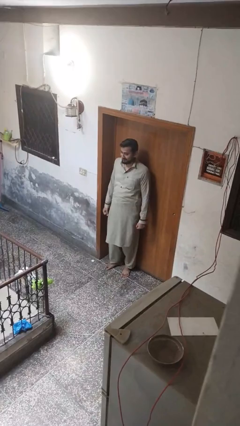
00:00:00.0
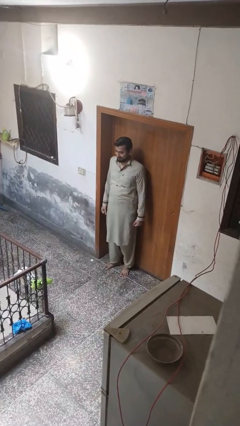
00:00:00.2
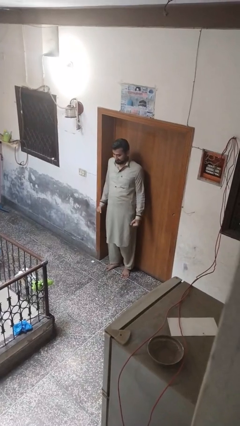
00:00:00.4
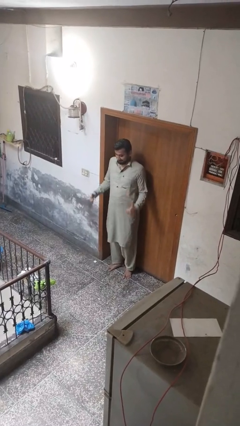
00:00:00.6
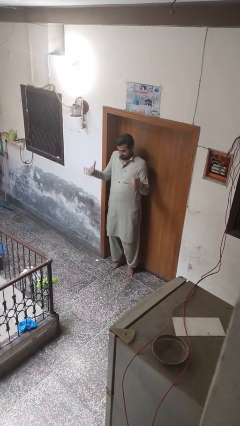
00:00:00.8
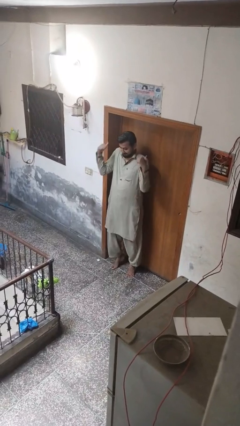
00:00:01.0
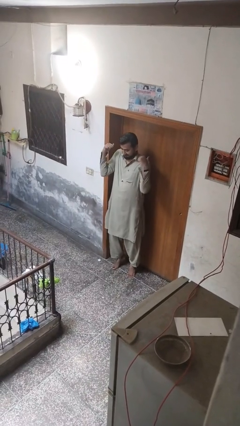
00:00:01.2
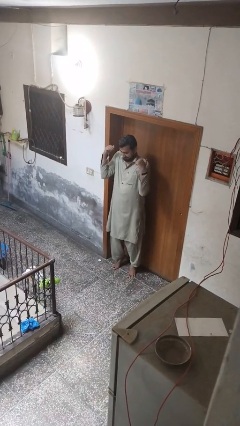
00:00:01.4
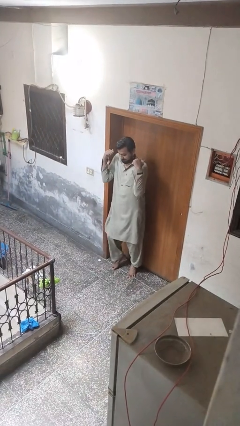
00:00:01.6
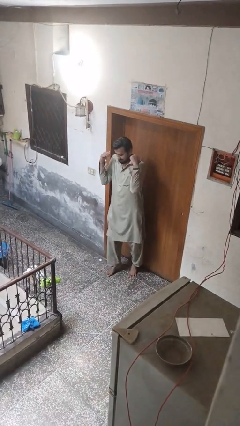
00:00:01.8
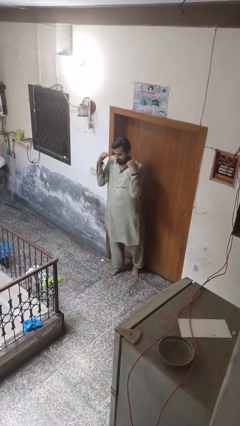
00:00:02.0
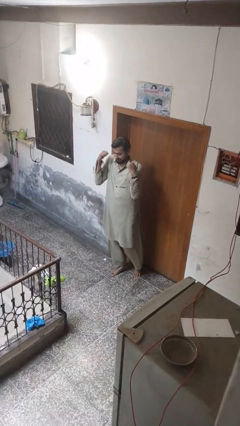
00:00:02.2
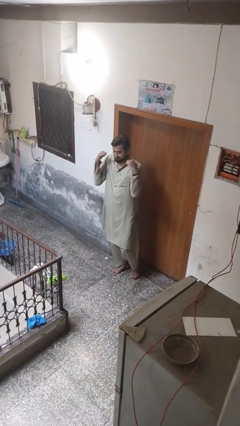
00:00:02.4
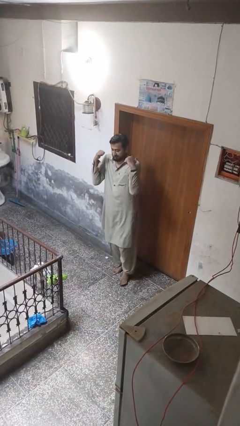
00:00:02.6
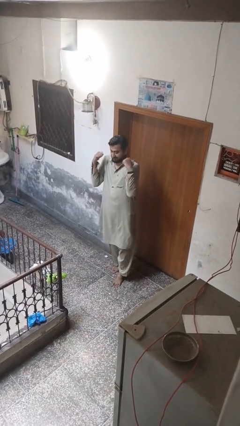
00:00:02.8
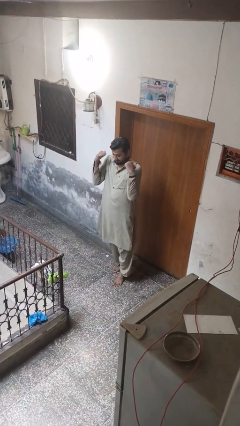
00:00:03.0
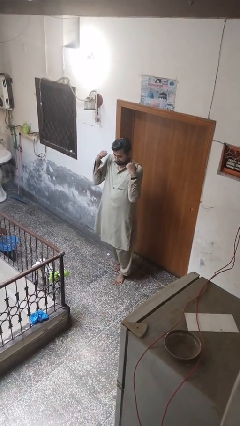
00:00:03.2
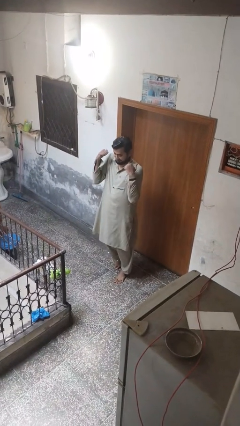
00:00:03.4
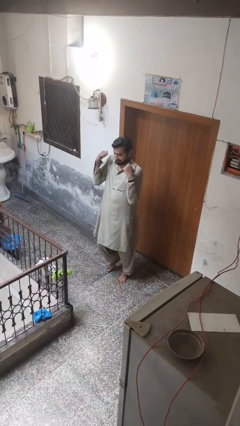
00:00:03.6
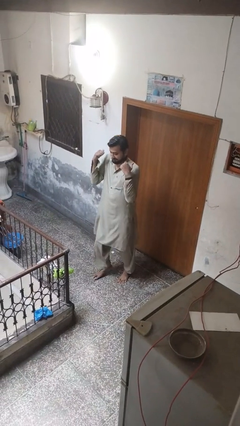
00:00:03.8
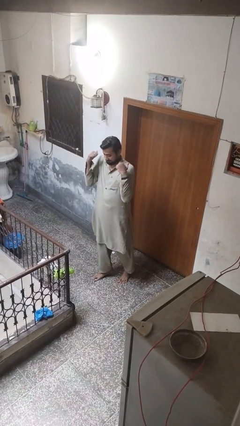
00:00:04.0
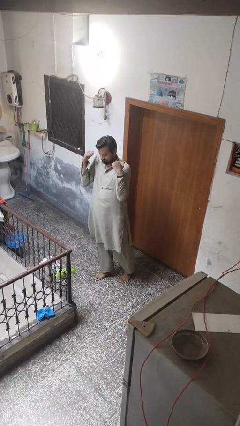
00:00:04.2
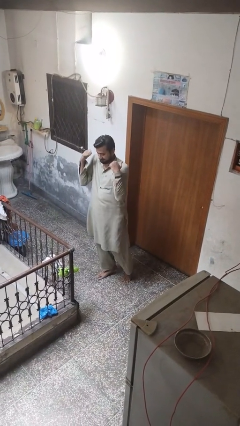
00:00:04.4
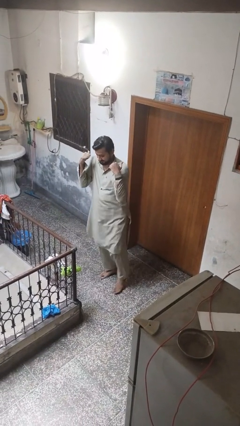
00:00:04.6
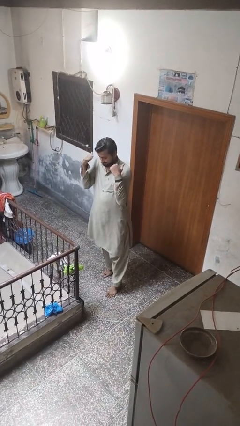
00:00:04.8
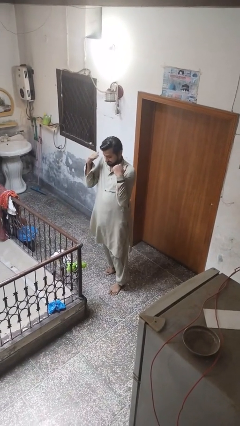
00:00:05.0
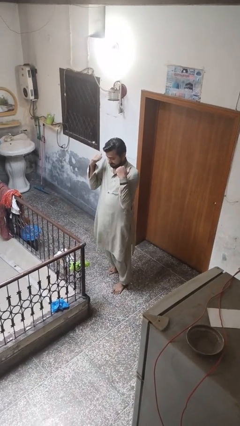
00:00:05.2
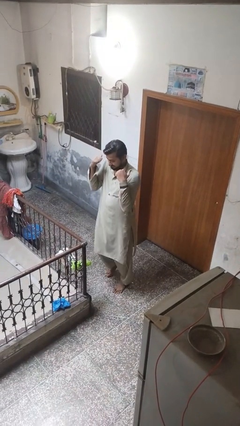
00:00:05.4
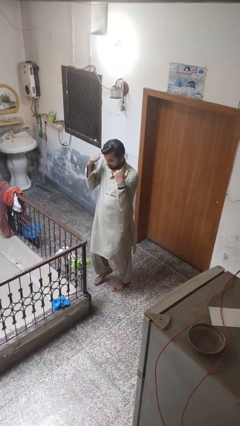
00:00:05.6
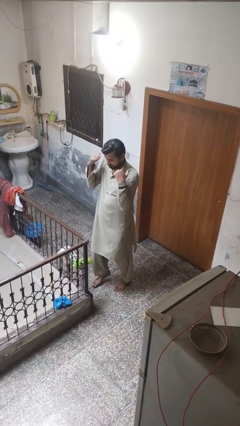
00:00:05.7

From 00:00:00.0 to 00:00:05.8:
person walks tiptoe

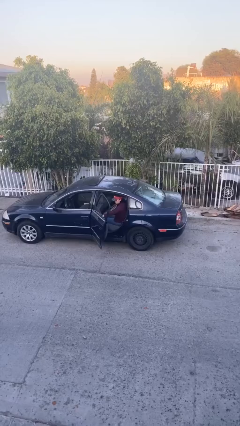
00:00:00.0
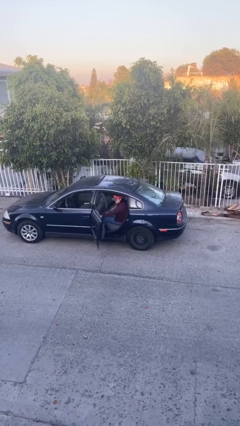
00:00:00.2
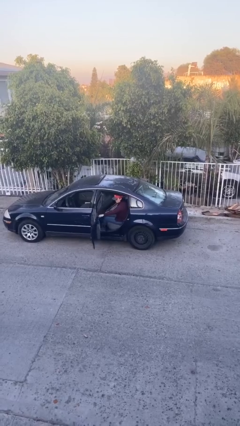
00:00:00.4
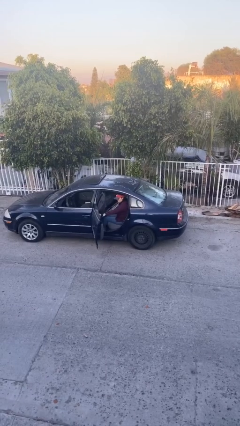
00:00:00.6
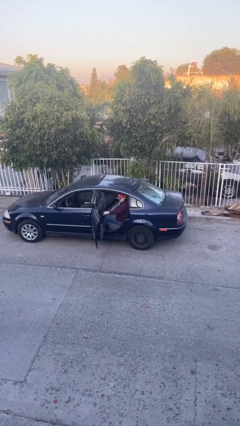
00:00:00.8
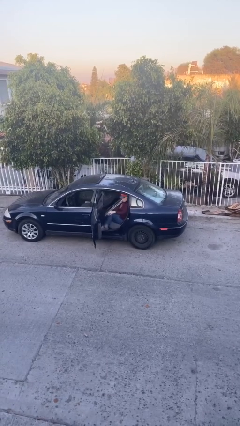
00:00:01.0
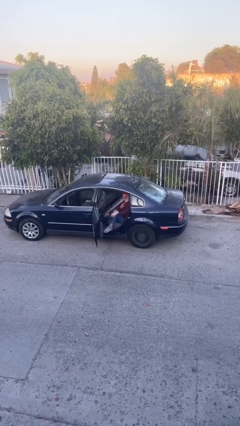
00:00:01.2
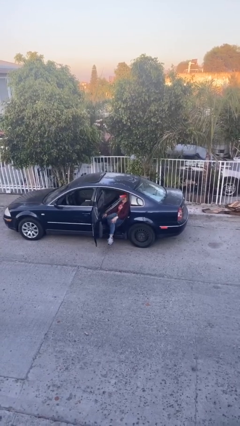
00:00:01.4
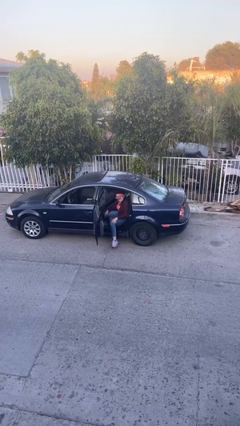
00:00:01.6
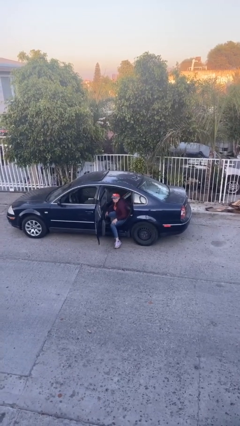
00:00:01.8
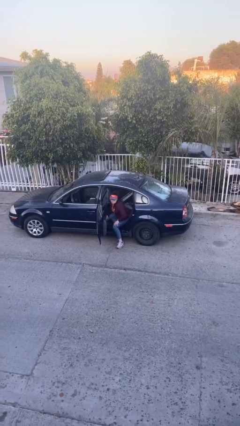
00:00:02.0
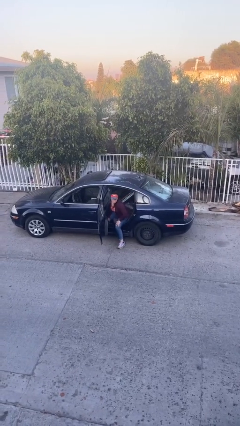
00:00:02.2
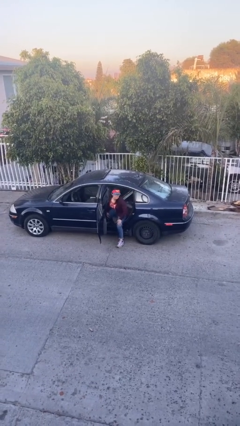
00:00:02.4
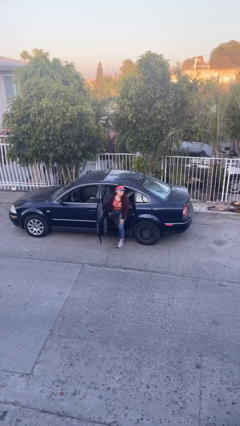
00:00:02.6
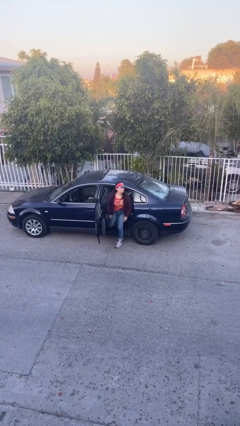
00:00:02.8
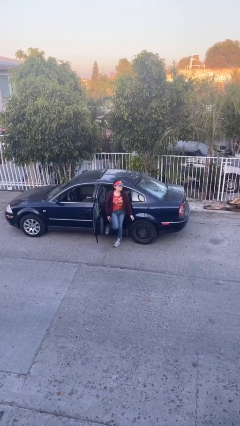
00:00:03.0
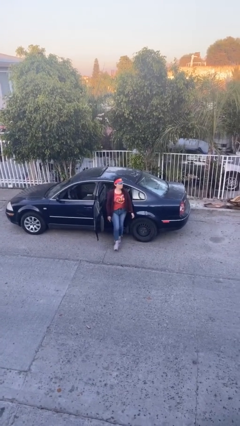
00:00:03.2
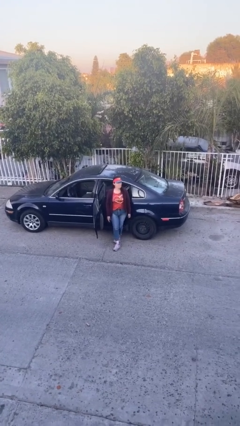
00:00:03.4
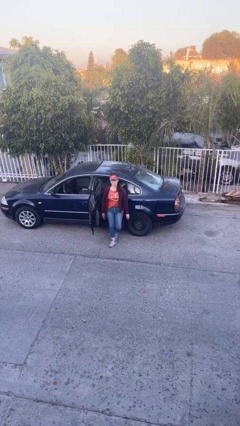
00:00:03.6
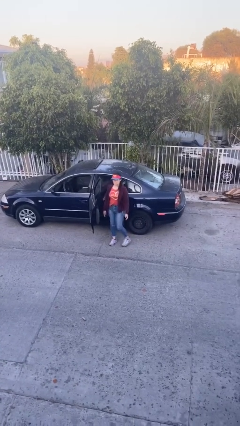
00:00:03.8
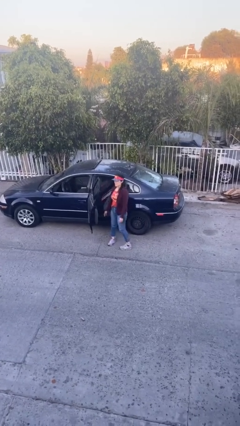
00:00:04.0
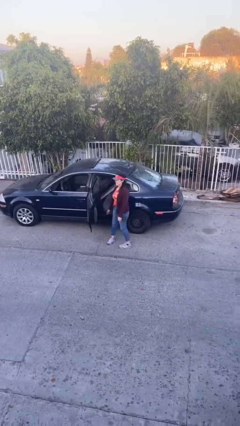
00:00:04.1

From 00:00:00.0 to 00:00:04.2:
person exits car

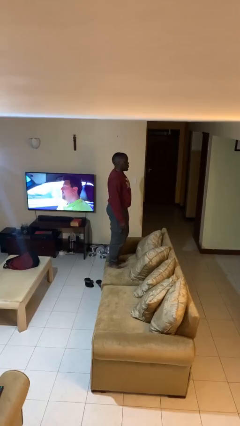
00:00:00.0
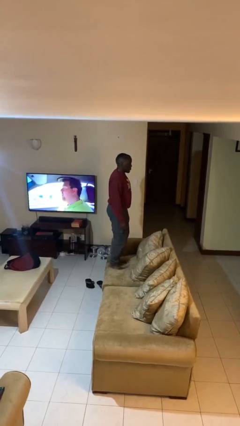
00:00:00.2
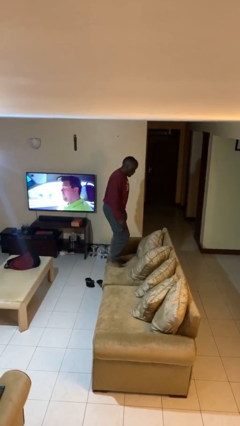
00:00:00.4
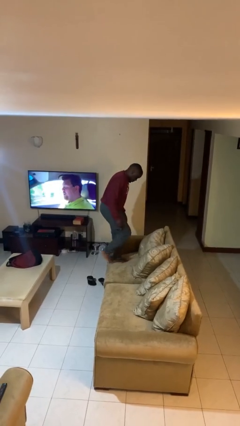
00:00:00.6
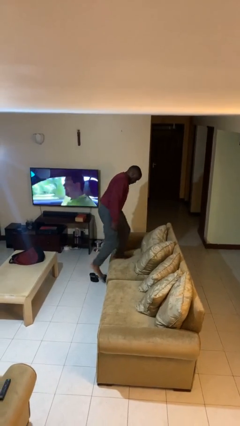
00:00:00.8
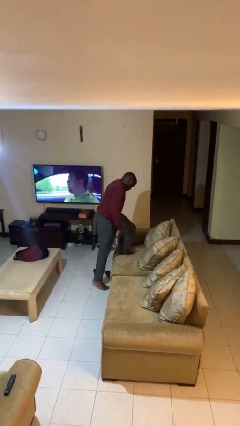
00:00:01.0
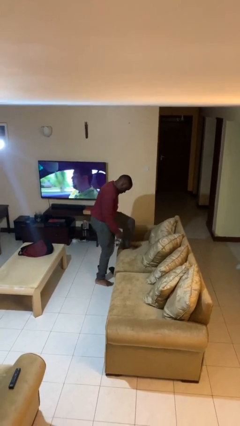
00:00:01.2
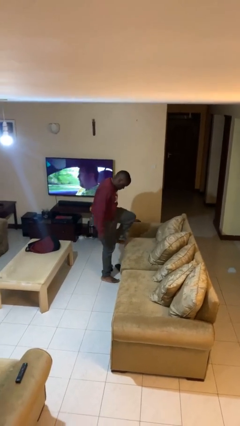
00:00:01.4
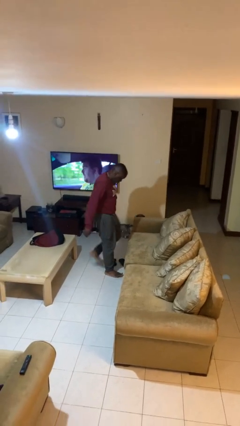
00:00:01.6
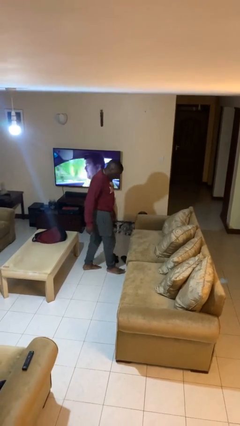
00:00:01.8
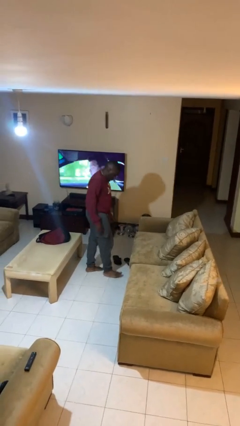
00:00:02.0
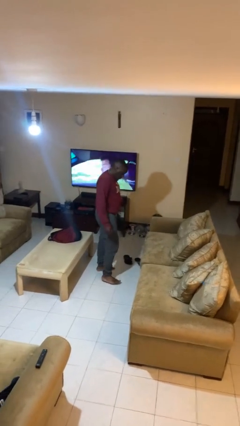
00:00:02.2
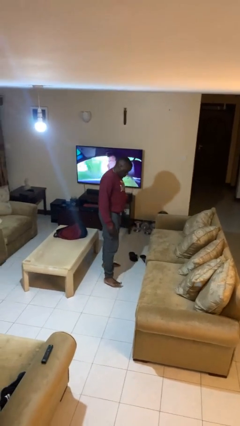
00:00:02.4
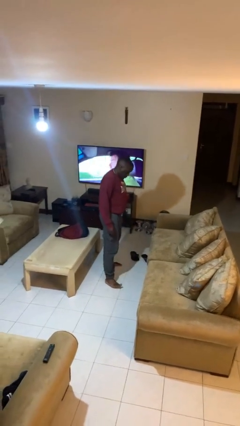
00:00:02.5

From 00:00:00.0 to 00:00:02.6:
person climbs off couch

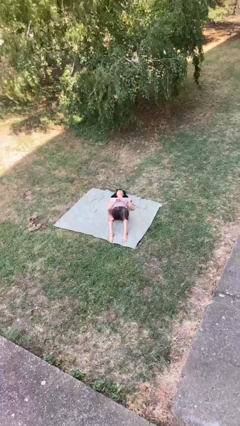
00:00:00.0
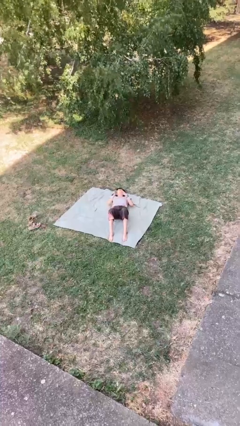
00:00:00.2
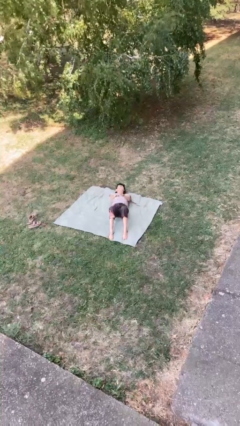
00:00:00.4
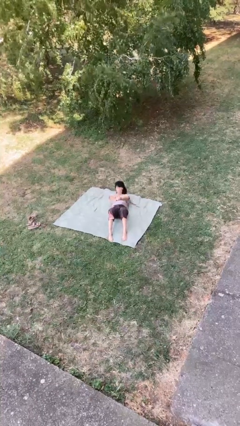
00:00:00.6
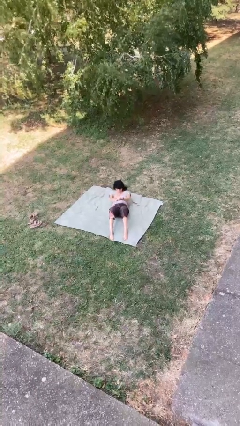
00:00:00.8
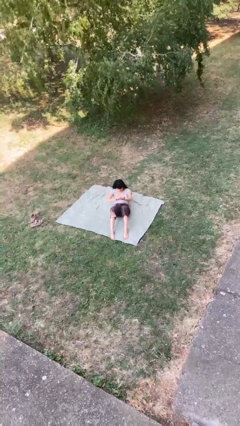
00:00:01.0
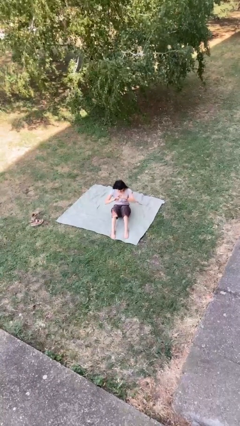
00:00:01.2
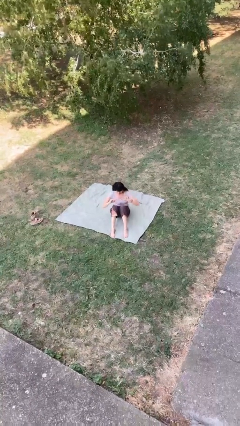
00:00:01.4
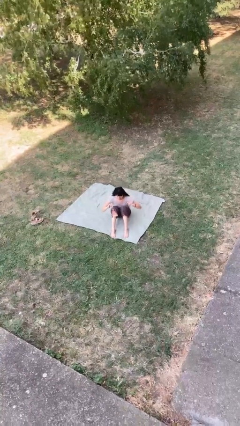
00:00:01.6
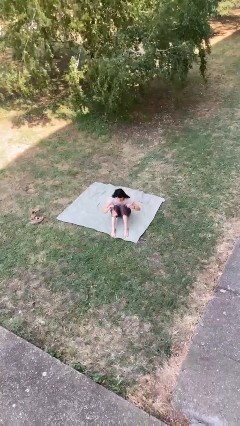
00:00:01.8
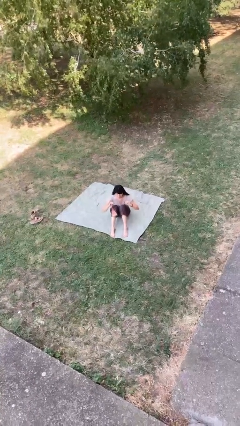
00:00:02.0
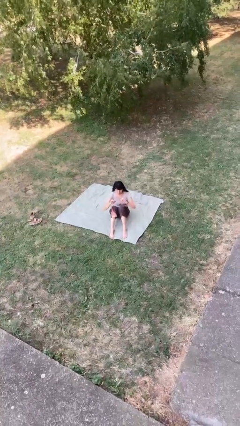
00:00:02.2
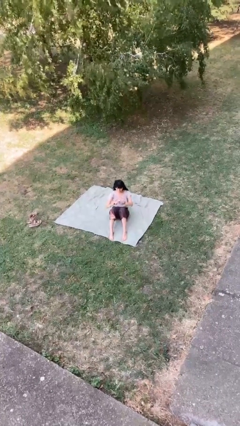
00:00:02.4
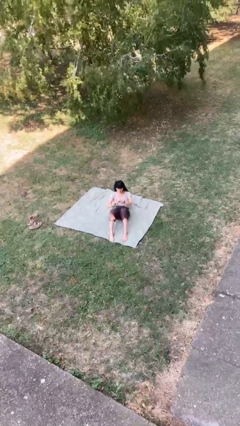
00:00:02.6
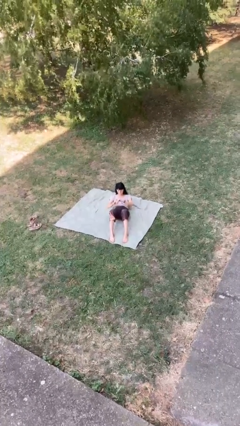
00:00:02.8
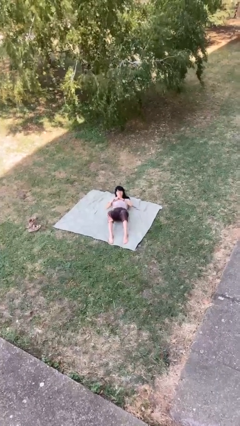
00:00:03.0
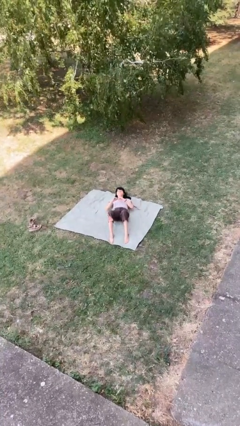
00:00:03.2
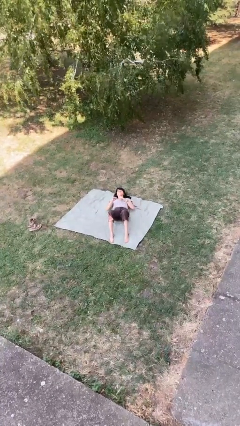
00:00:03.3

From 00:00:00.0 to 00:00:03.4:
person exercises with situp

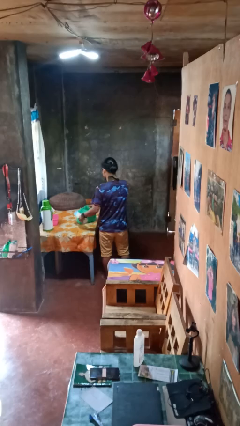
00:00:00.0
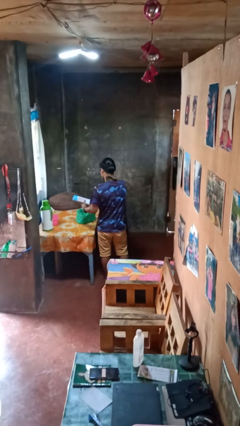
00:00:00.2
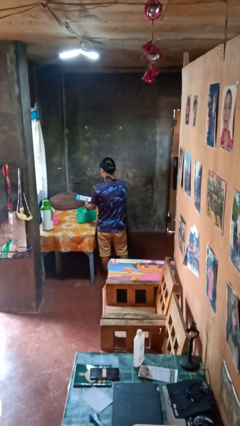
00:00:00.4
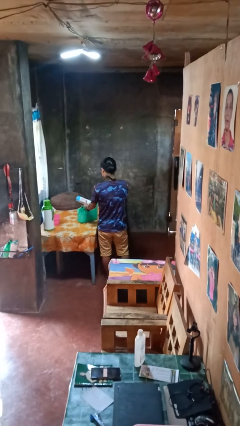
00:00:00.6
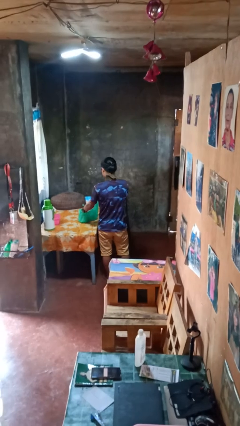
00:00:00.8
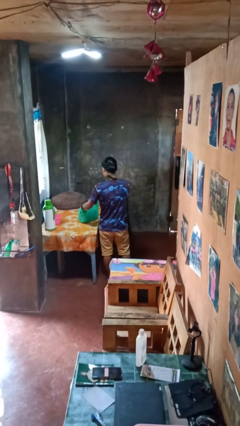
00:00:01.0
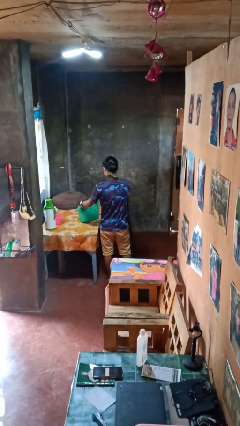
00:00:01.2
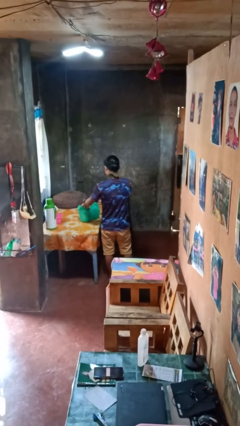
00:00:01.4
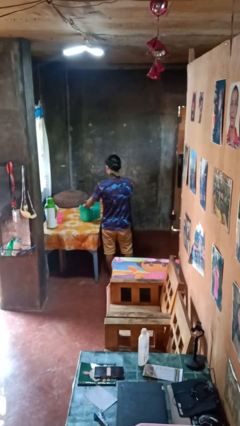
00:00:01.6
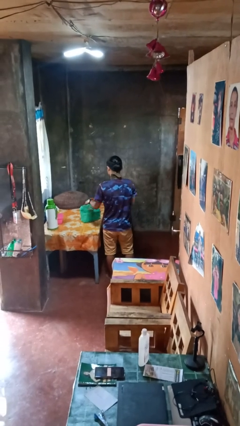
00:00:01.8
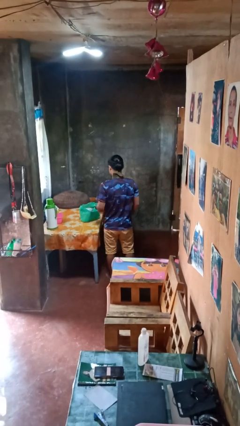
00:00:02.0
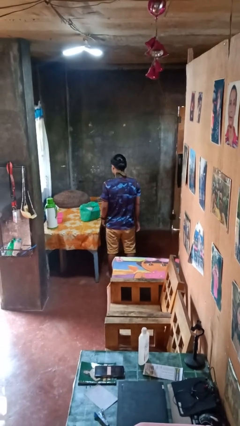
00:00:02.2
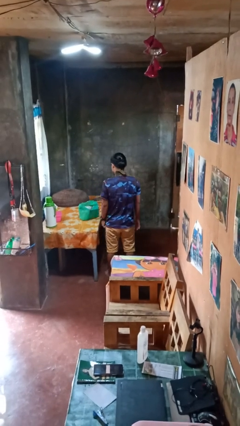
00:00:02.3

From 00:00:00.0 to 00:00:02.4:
person puts object into bag
